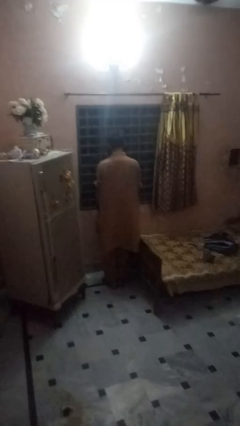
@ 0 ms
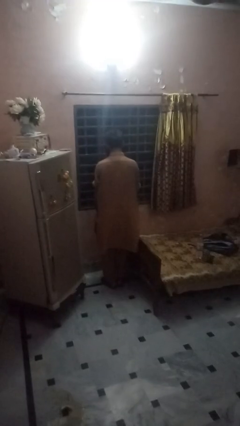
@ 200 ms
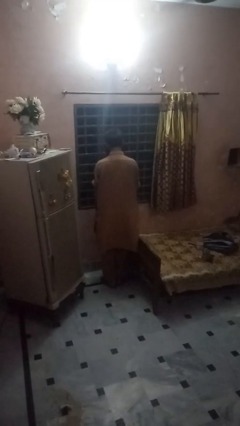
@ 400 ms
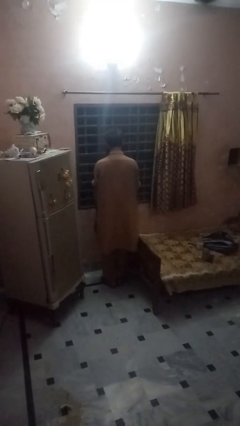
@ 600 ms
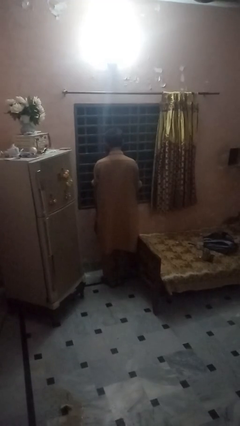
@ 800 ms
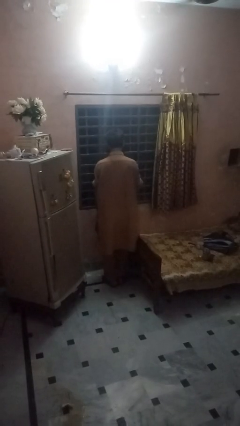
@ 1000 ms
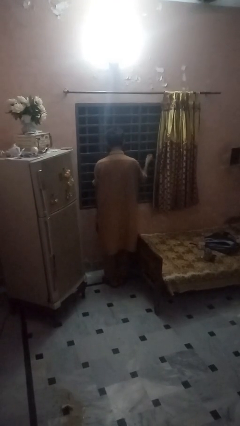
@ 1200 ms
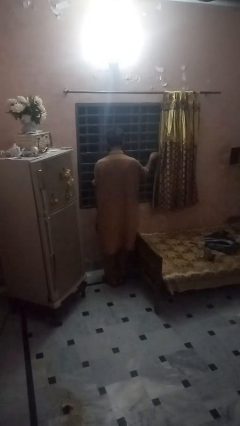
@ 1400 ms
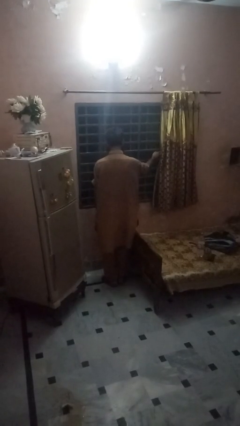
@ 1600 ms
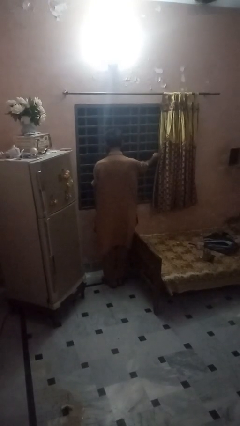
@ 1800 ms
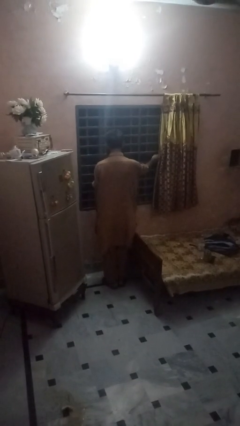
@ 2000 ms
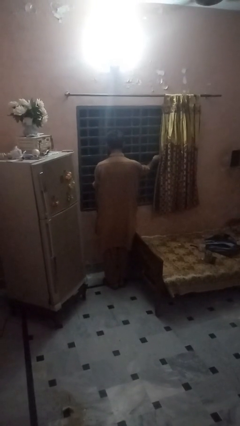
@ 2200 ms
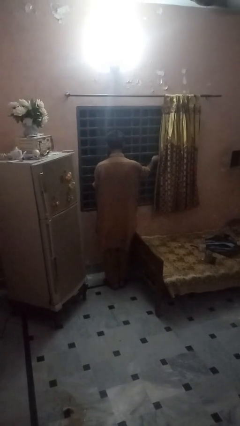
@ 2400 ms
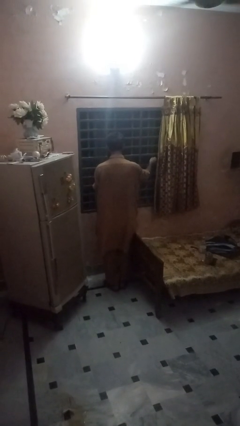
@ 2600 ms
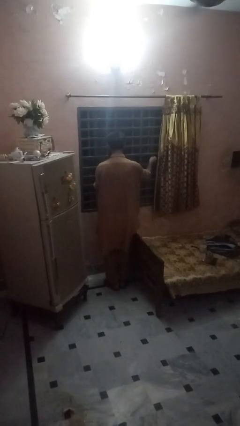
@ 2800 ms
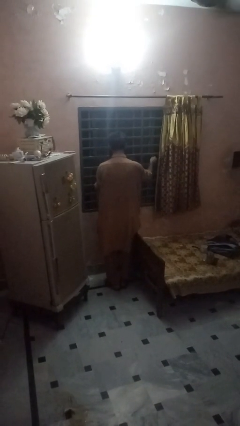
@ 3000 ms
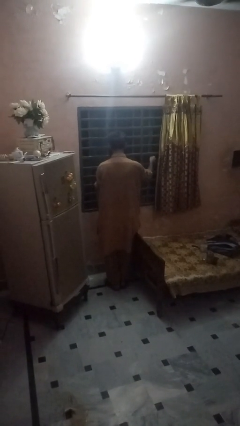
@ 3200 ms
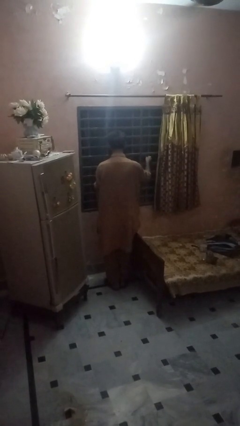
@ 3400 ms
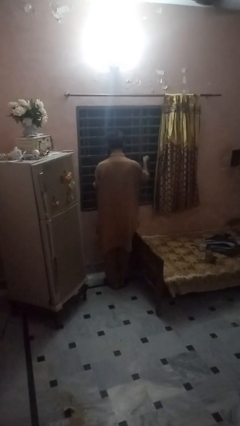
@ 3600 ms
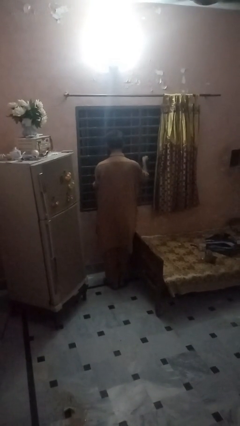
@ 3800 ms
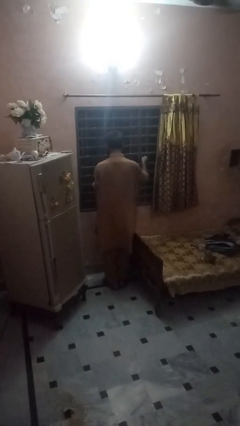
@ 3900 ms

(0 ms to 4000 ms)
person closes home window

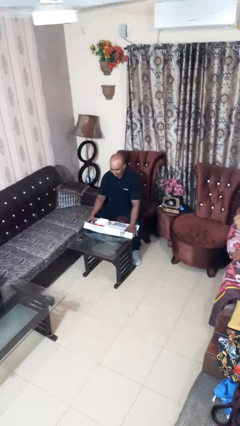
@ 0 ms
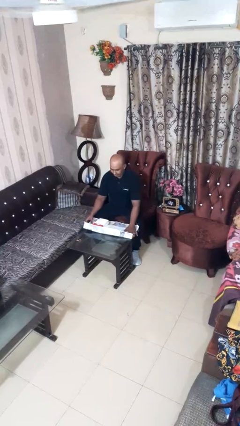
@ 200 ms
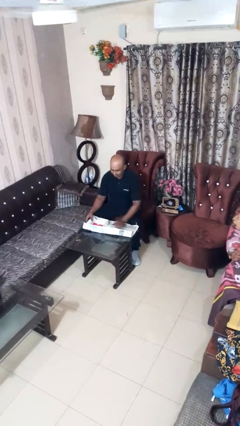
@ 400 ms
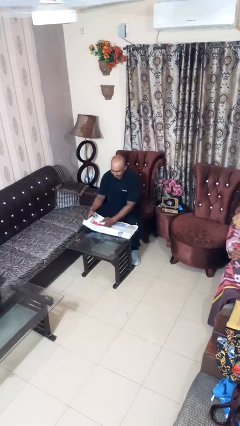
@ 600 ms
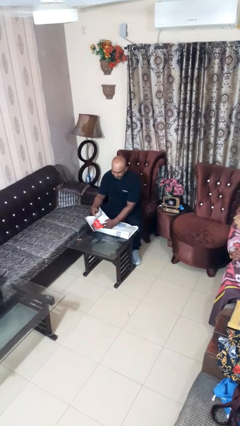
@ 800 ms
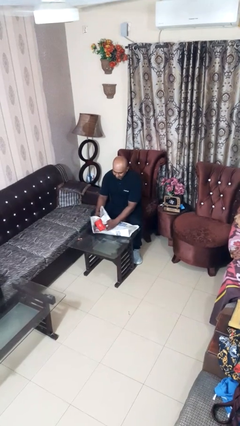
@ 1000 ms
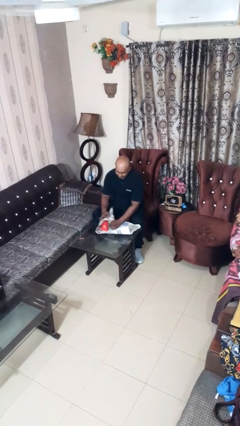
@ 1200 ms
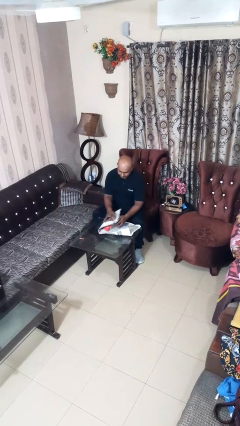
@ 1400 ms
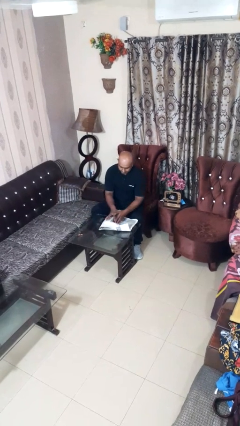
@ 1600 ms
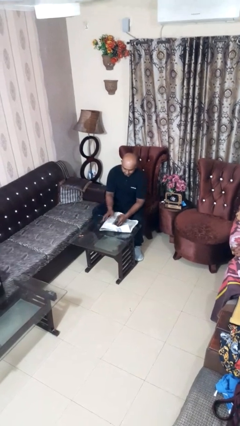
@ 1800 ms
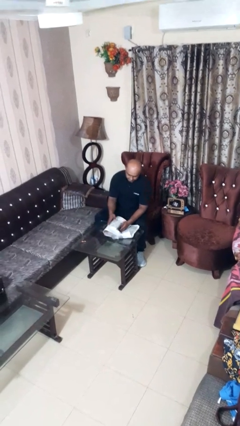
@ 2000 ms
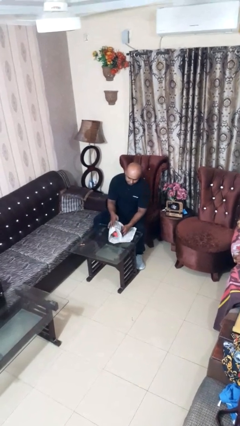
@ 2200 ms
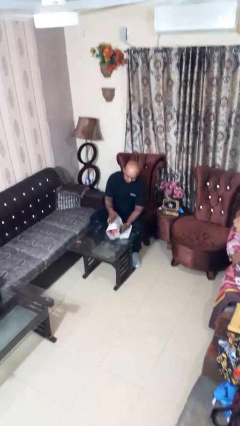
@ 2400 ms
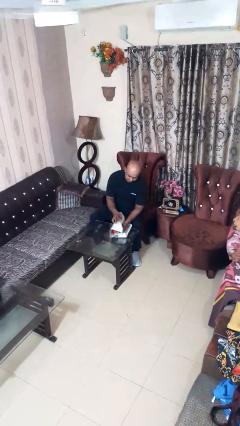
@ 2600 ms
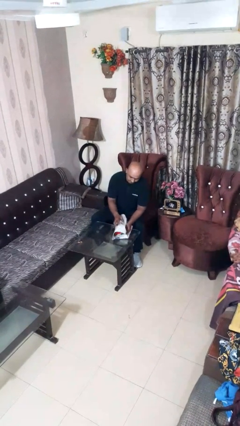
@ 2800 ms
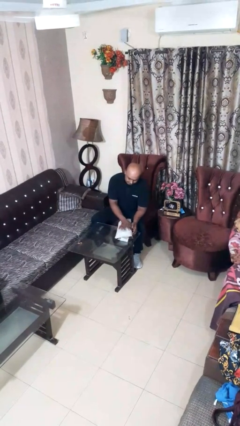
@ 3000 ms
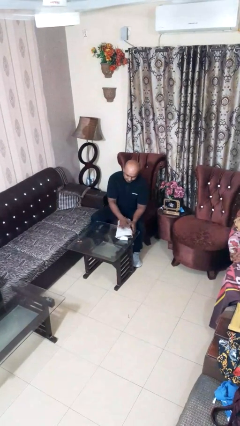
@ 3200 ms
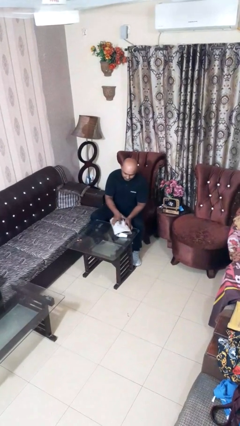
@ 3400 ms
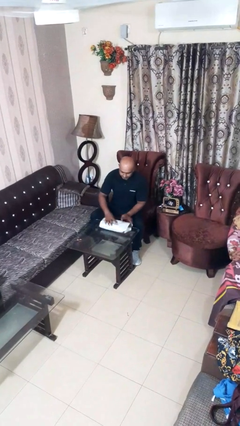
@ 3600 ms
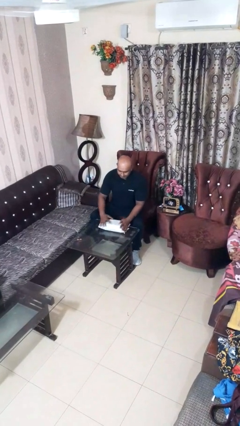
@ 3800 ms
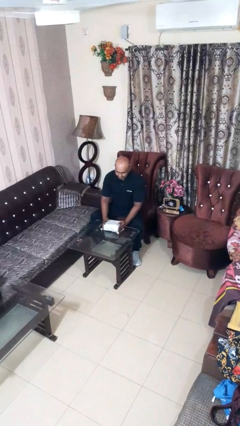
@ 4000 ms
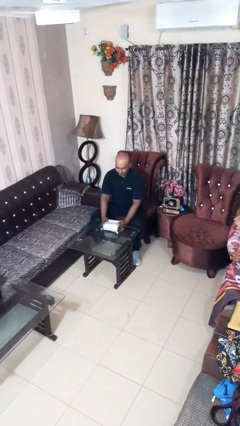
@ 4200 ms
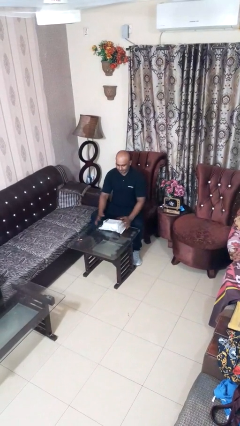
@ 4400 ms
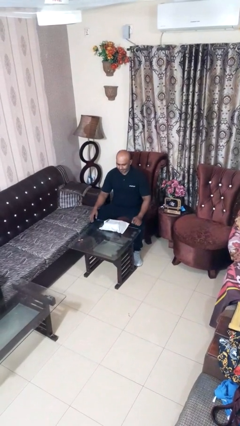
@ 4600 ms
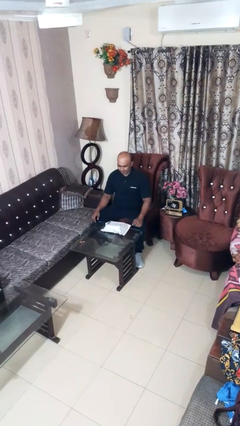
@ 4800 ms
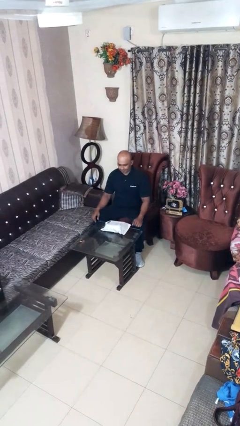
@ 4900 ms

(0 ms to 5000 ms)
person wraps box

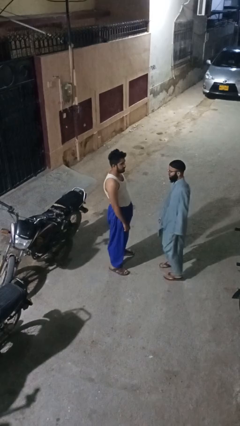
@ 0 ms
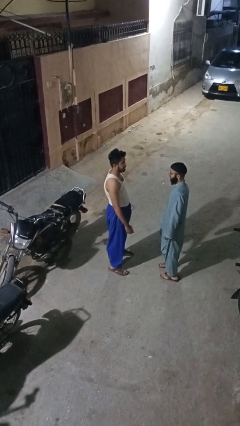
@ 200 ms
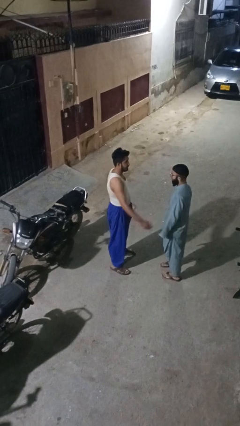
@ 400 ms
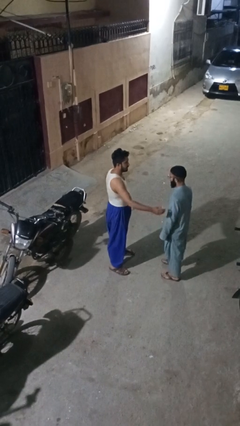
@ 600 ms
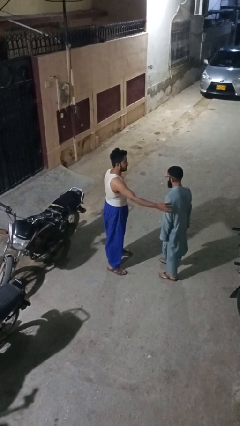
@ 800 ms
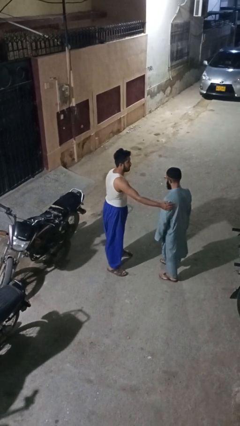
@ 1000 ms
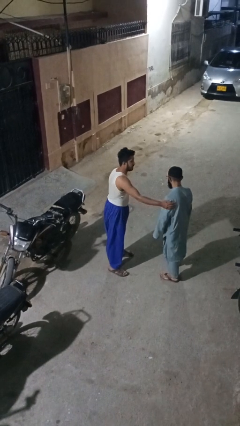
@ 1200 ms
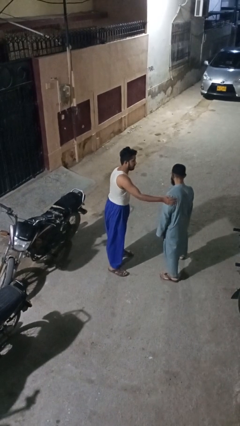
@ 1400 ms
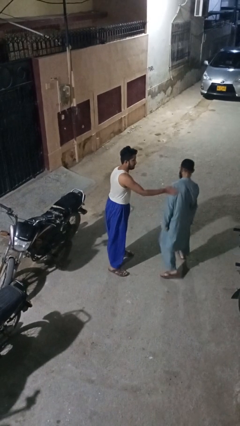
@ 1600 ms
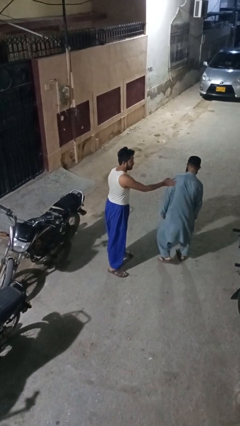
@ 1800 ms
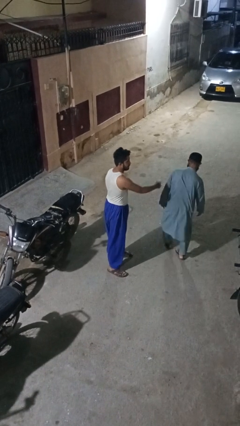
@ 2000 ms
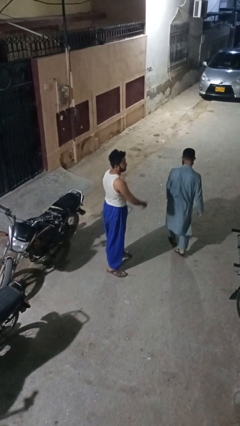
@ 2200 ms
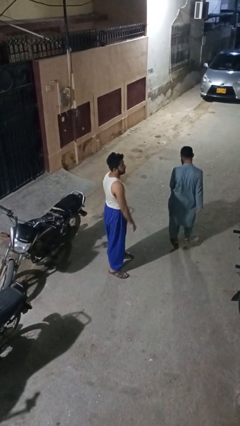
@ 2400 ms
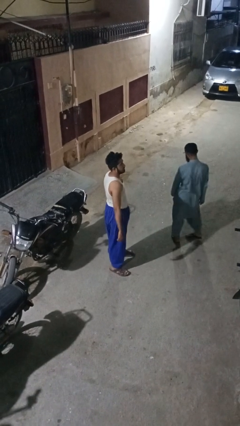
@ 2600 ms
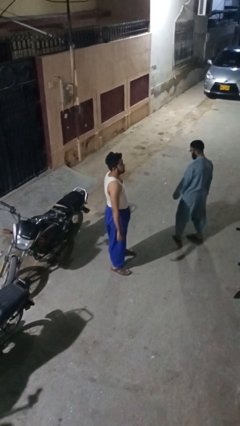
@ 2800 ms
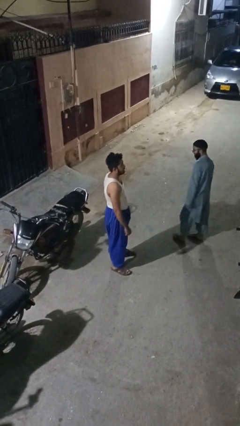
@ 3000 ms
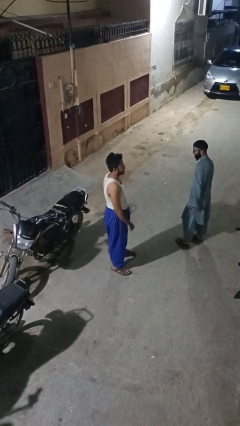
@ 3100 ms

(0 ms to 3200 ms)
person shoves person

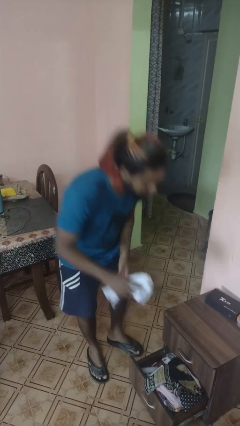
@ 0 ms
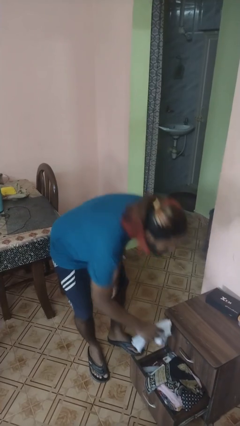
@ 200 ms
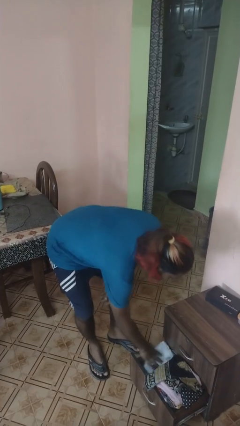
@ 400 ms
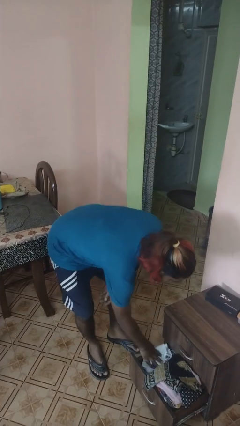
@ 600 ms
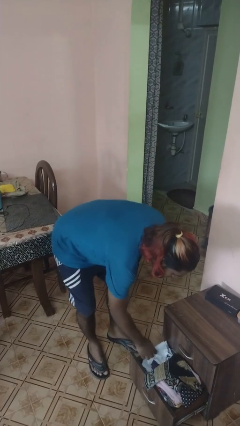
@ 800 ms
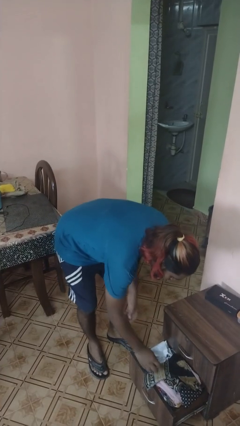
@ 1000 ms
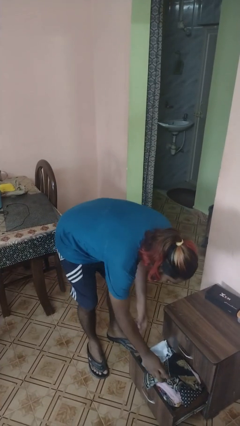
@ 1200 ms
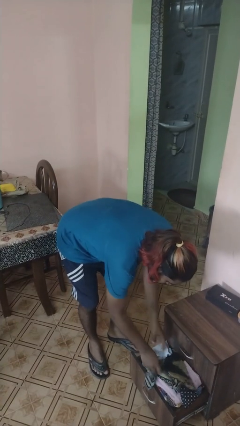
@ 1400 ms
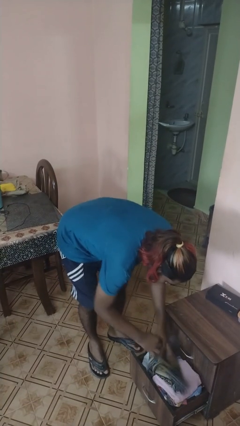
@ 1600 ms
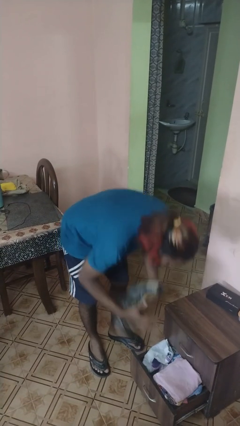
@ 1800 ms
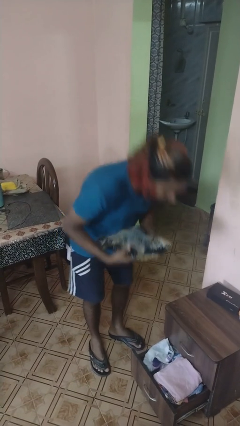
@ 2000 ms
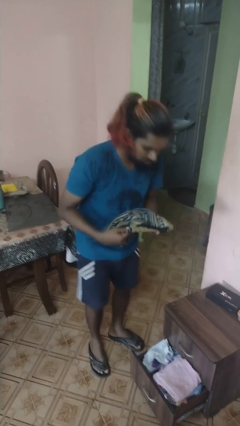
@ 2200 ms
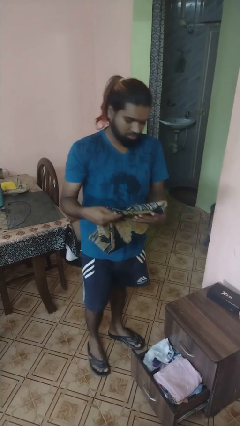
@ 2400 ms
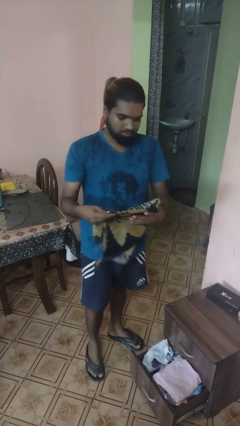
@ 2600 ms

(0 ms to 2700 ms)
person puts clothes into dresser

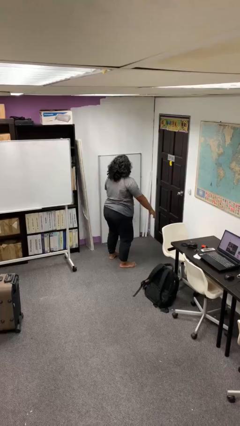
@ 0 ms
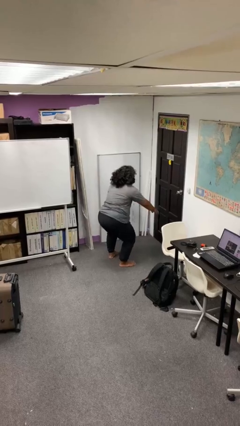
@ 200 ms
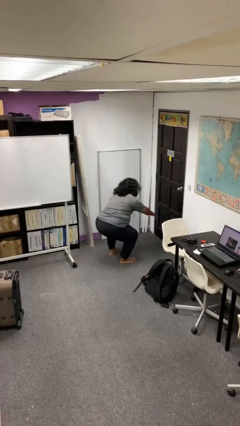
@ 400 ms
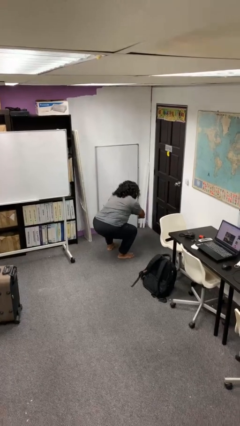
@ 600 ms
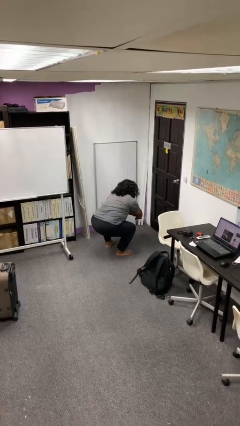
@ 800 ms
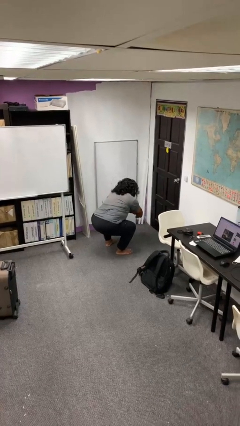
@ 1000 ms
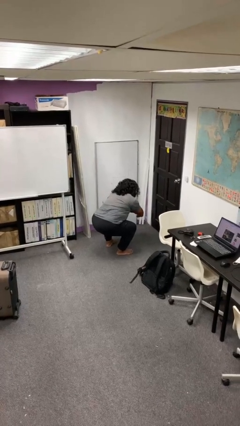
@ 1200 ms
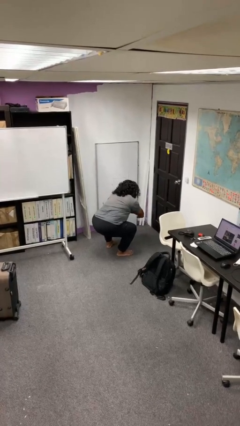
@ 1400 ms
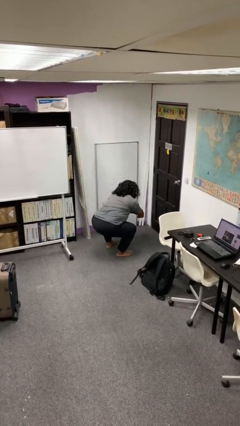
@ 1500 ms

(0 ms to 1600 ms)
person squats

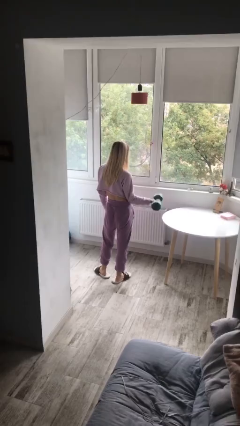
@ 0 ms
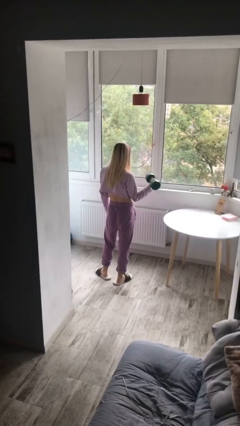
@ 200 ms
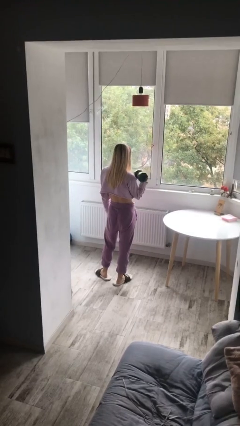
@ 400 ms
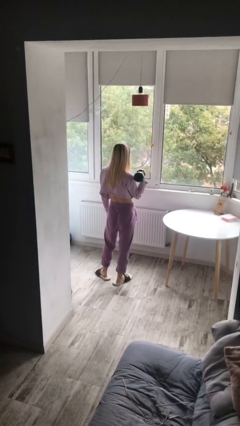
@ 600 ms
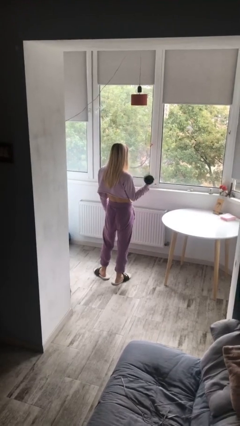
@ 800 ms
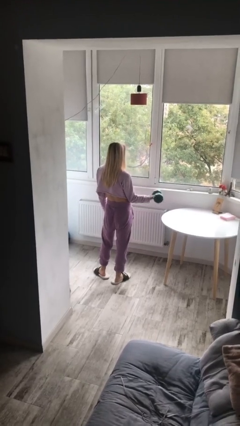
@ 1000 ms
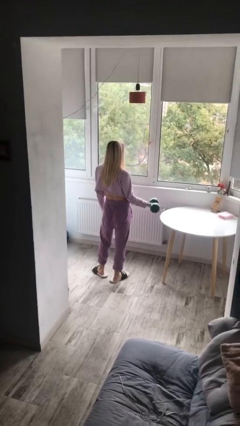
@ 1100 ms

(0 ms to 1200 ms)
person lifts dumbbells
